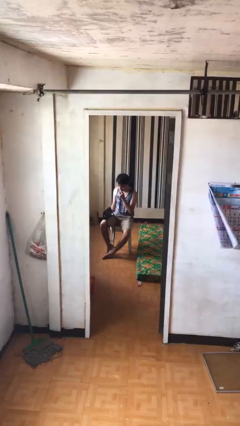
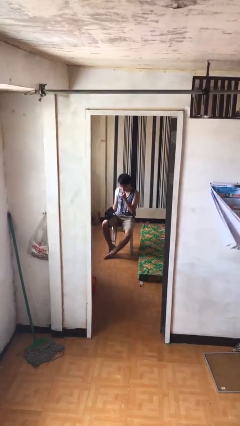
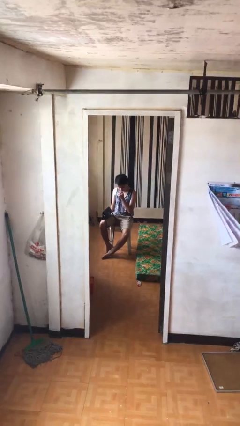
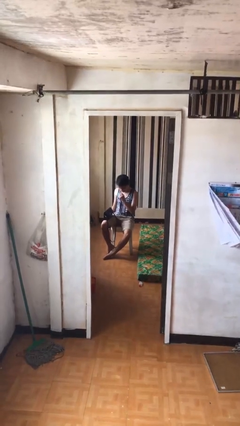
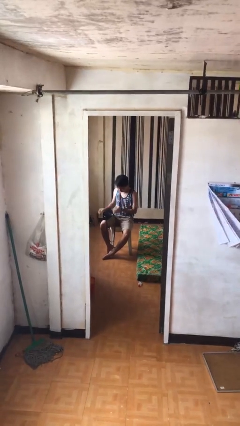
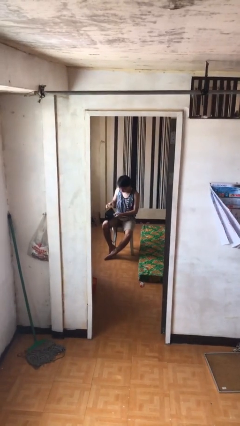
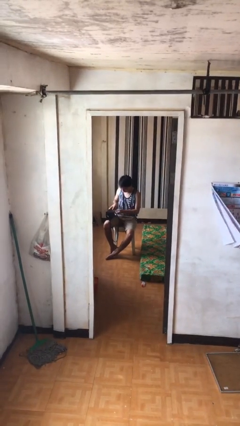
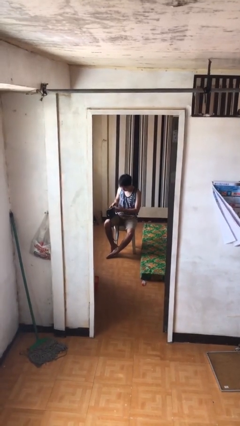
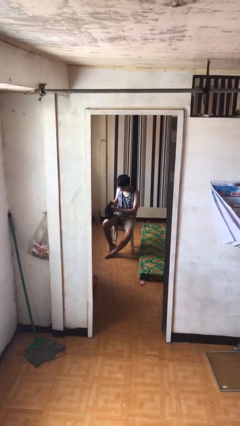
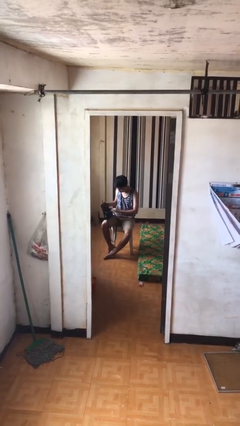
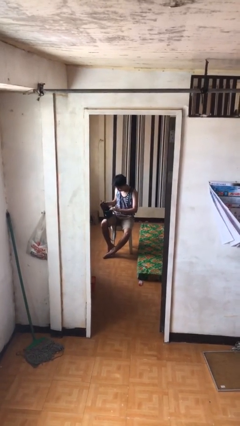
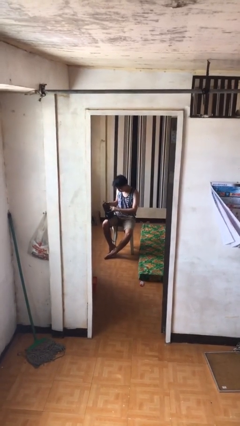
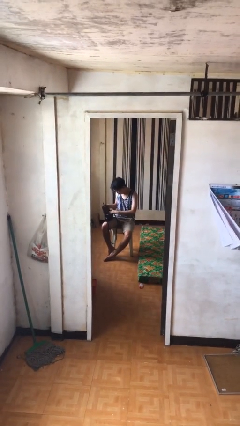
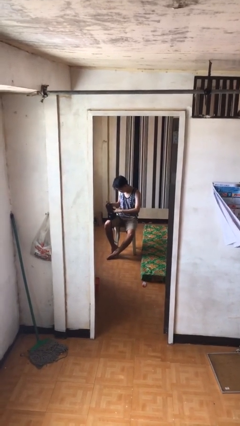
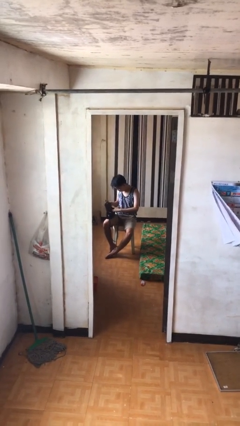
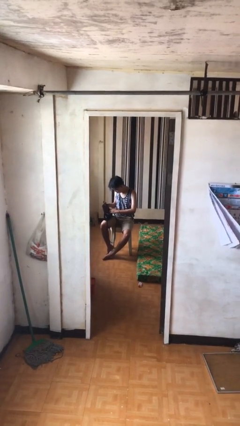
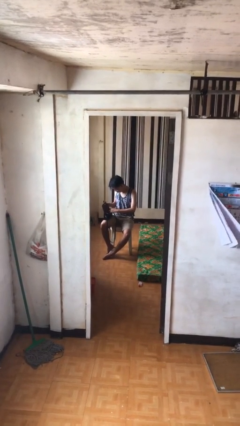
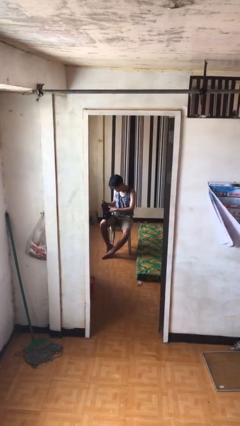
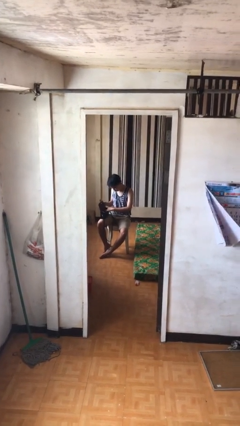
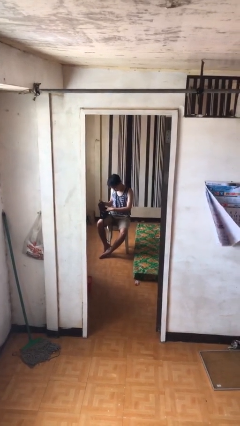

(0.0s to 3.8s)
person searches in purse

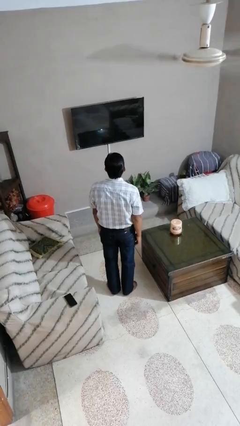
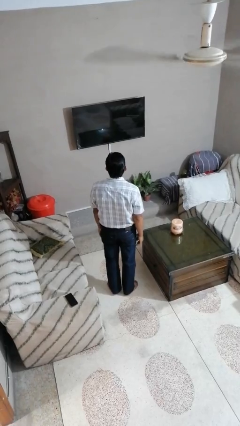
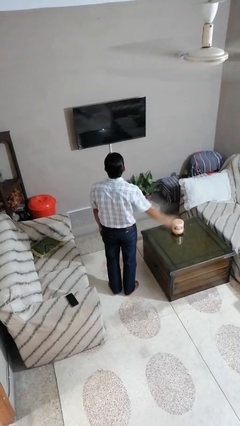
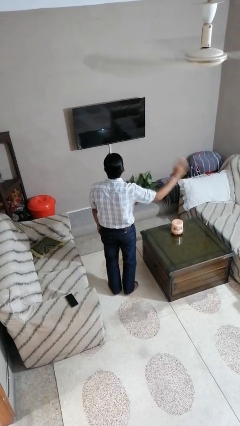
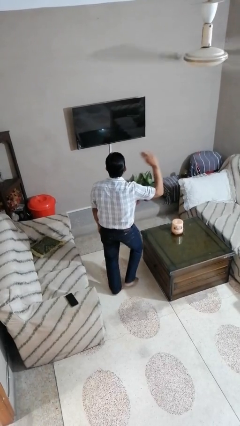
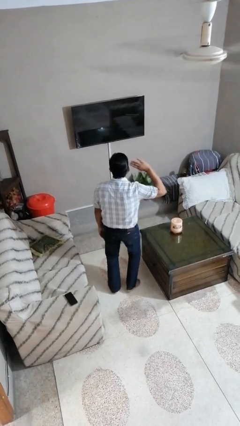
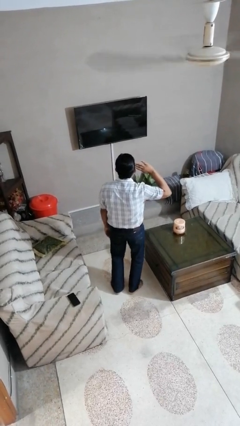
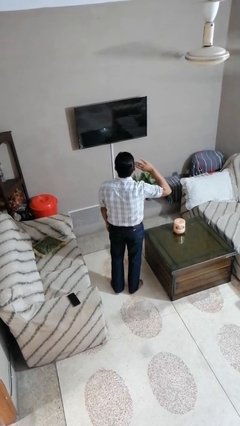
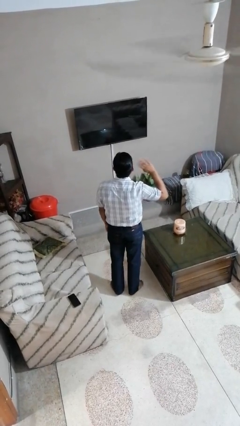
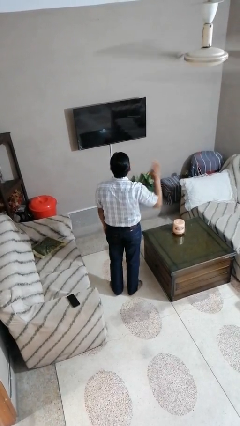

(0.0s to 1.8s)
person salutes

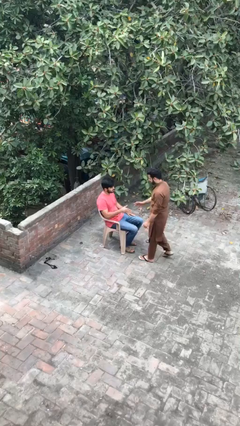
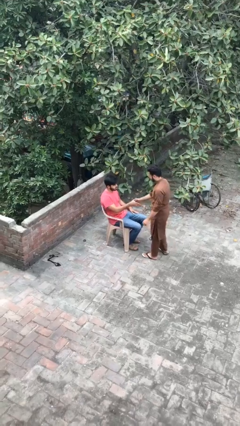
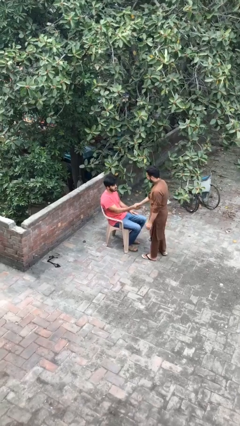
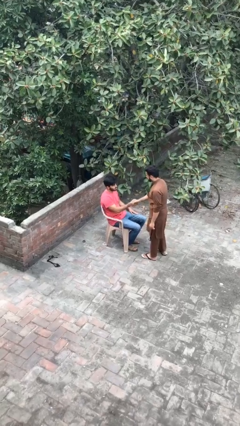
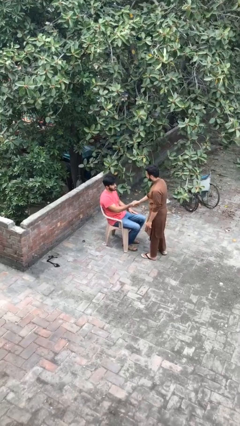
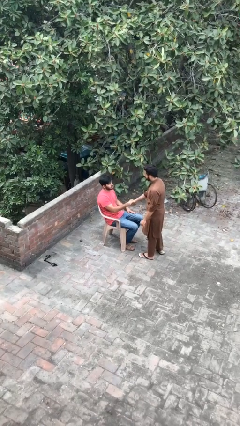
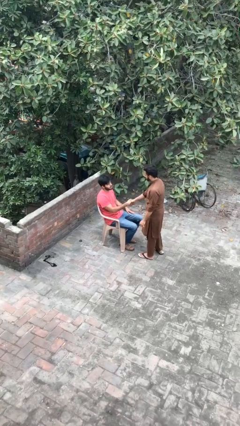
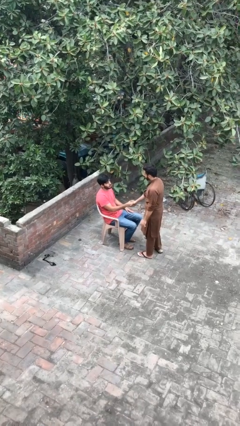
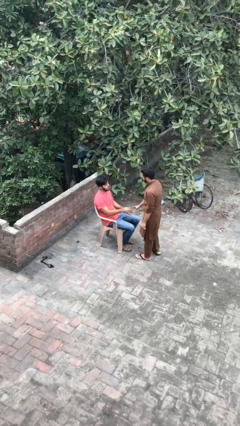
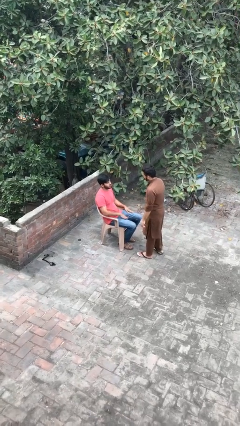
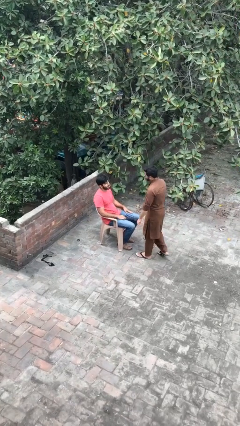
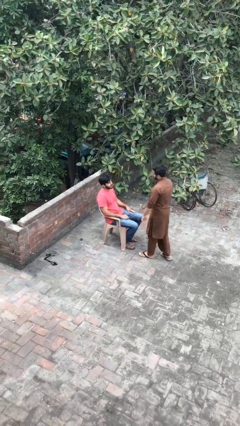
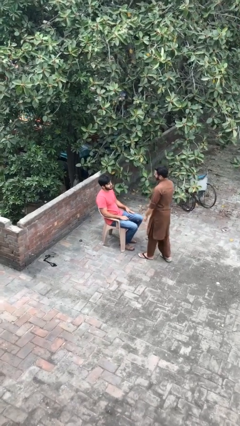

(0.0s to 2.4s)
person shakes hand

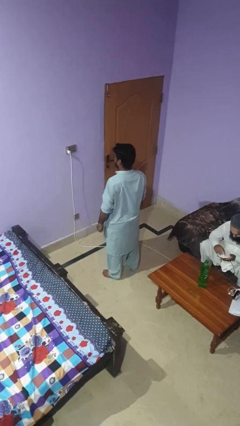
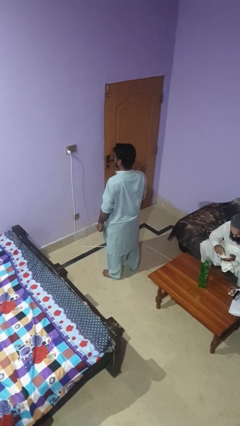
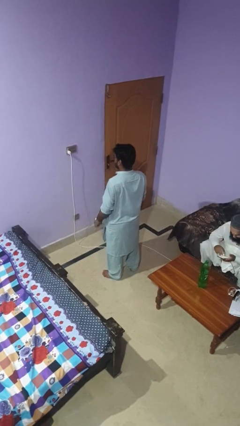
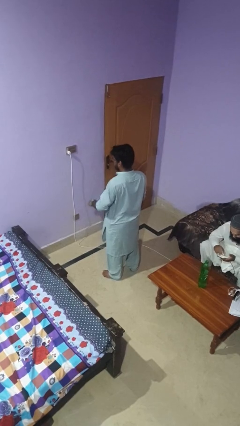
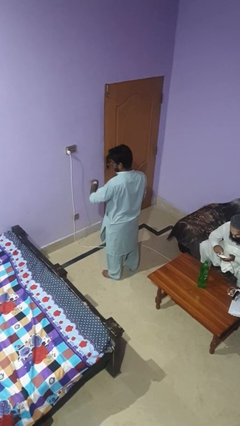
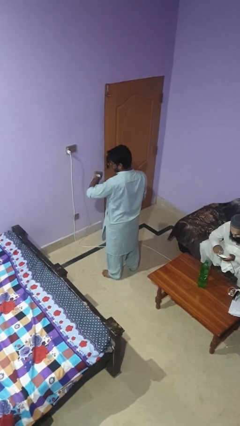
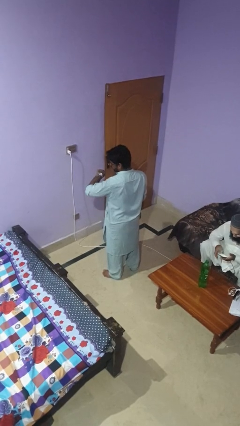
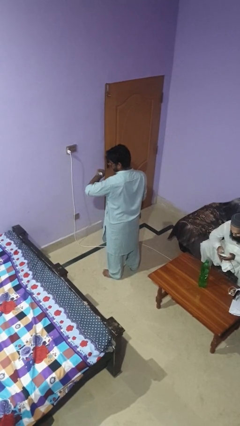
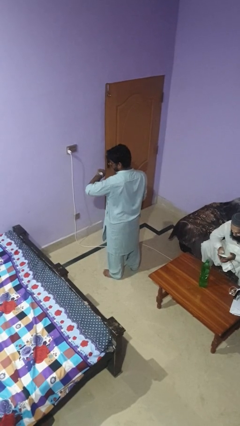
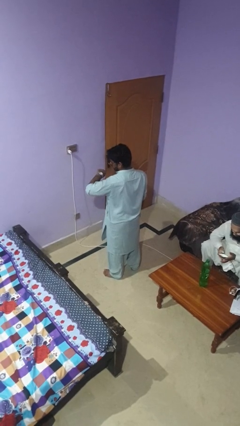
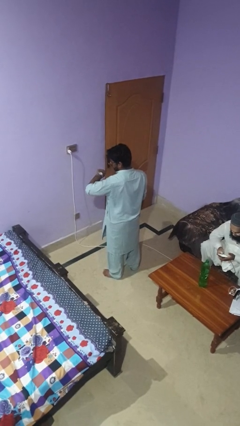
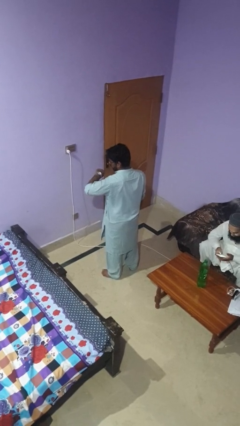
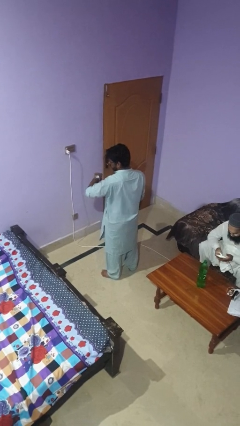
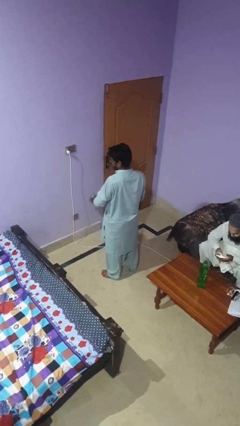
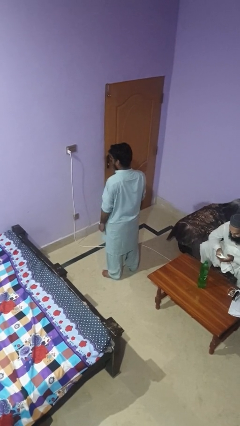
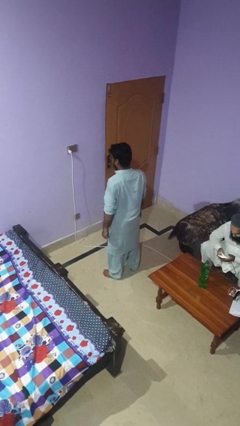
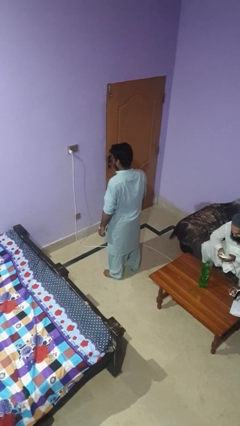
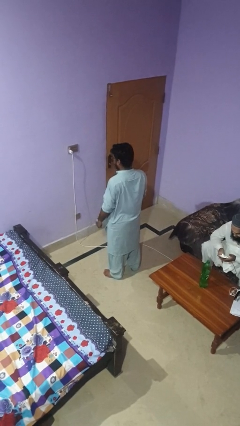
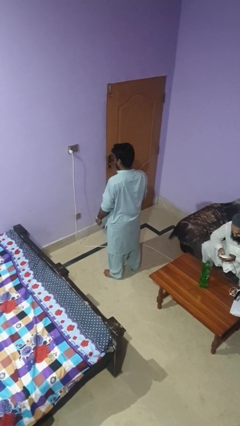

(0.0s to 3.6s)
person looks at wristwatch

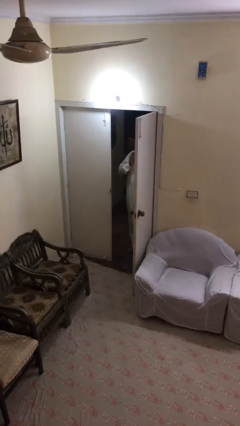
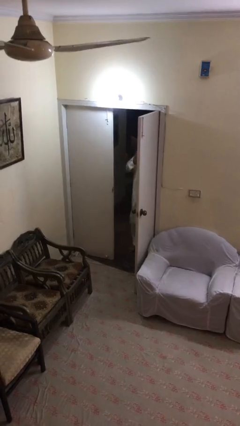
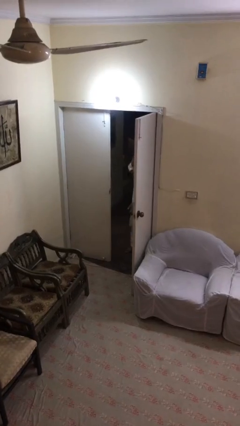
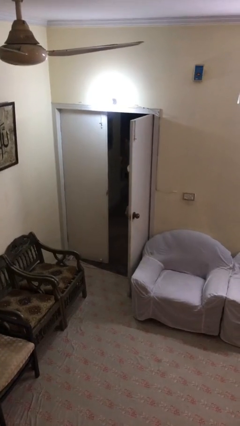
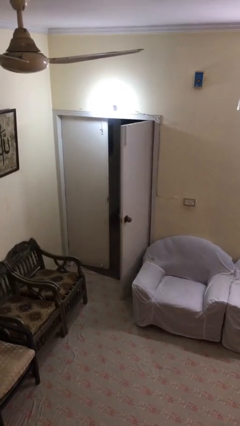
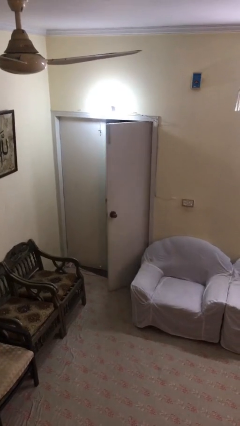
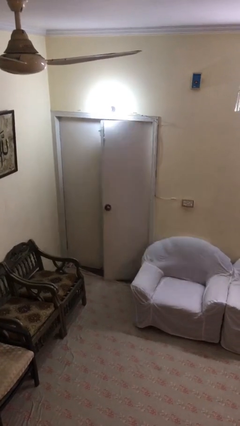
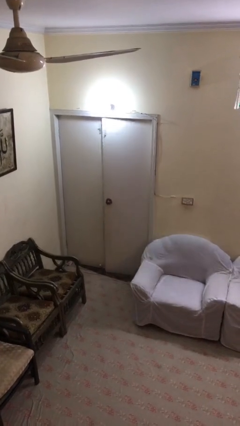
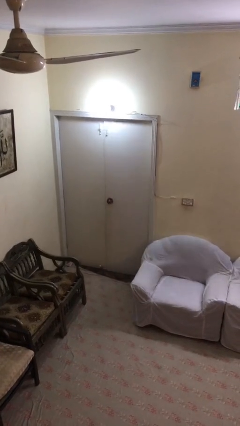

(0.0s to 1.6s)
person closes facility door

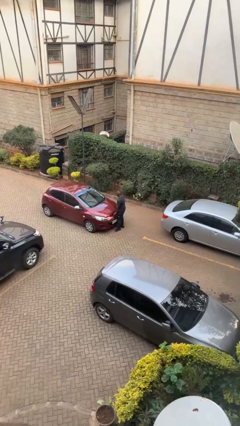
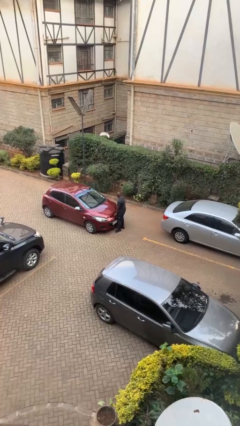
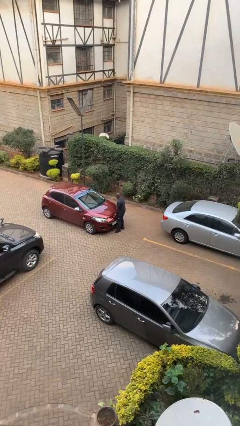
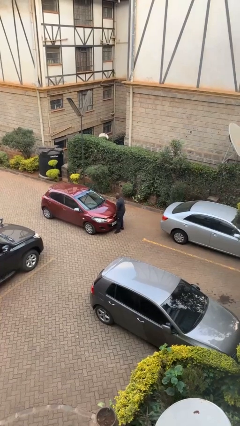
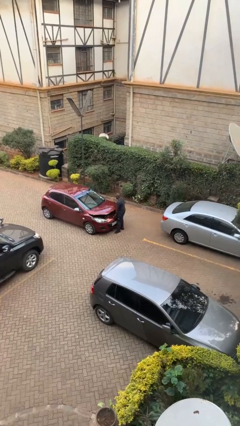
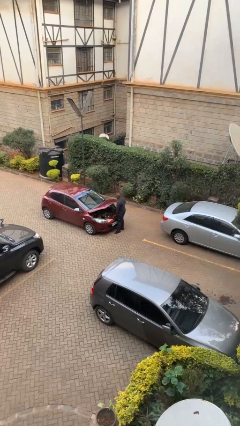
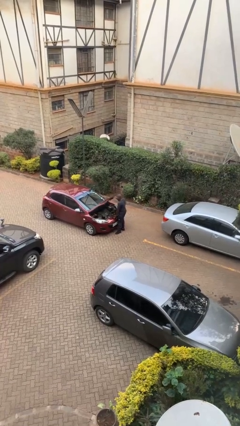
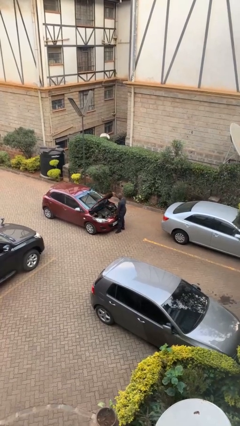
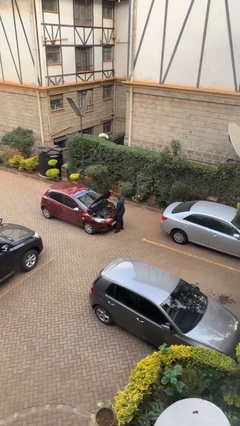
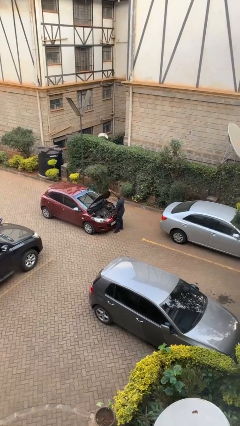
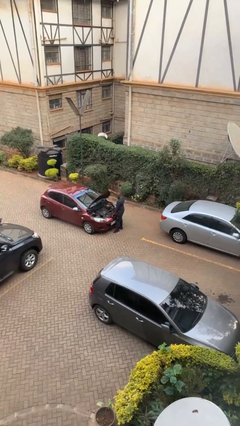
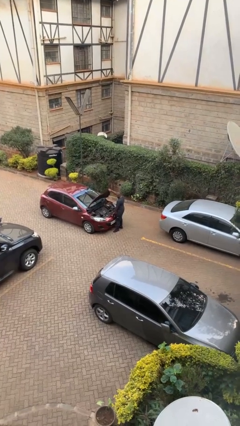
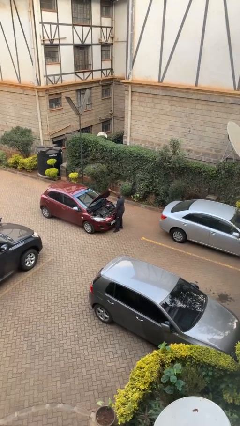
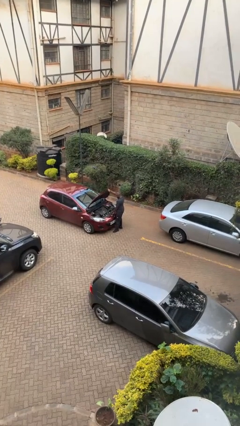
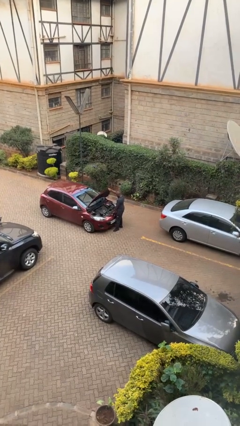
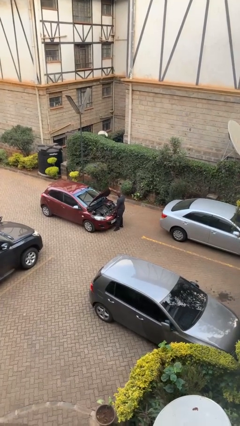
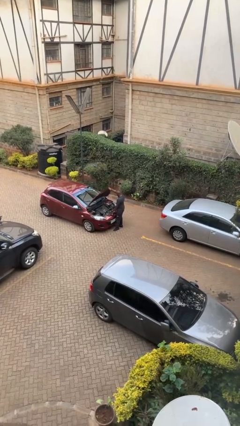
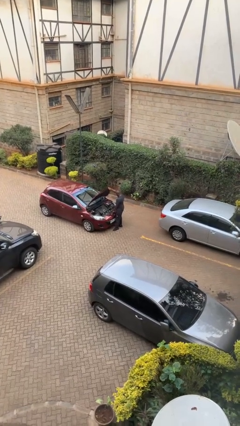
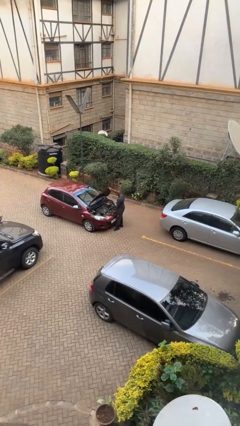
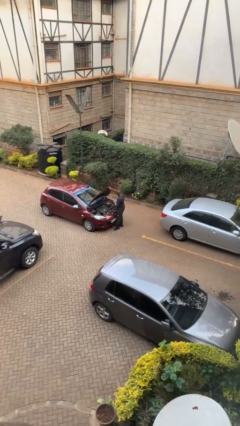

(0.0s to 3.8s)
person opens car hood

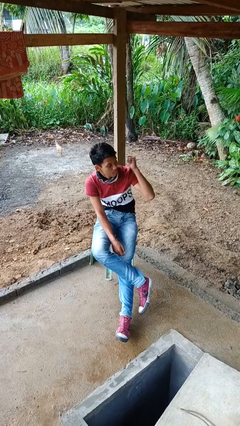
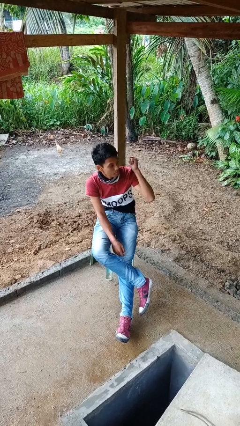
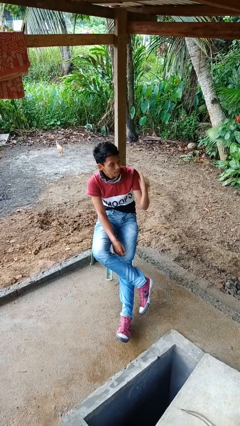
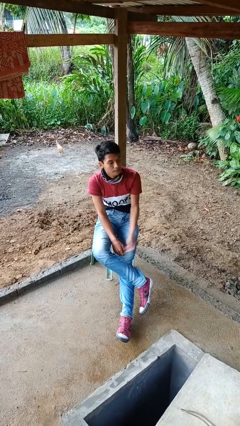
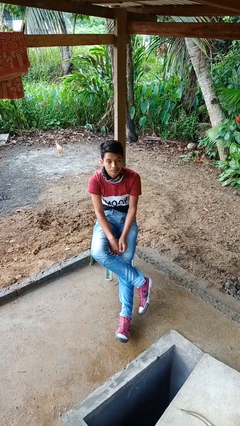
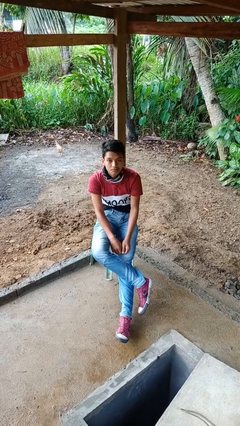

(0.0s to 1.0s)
person gestures behind me
